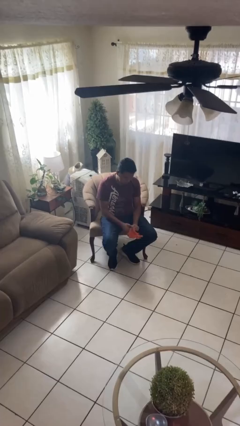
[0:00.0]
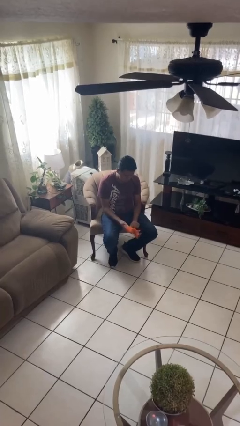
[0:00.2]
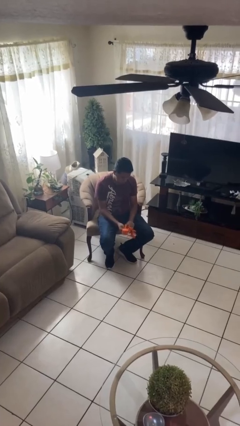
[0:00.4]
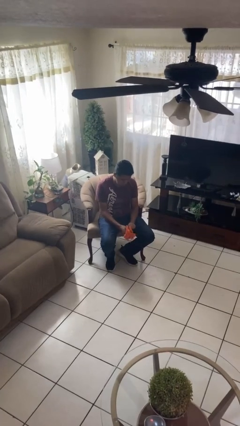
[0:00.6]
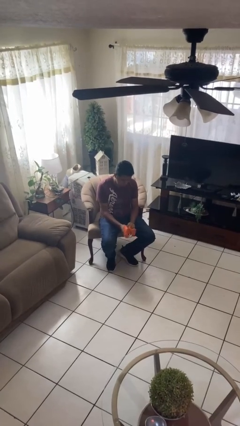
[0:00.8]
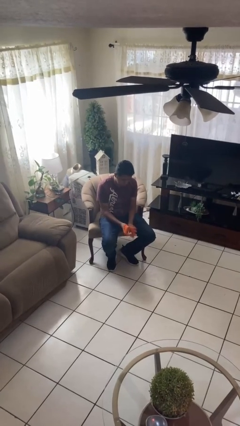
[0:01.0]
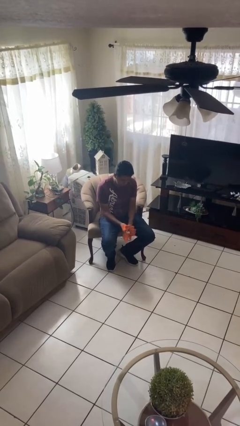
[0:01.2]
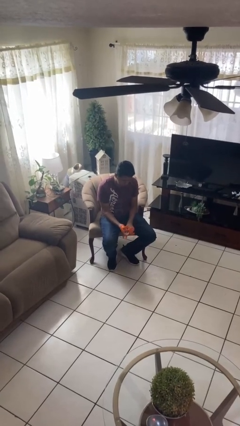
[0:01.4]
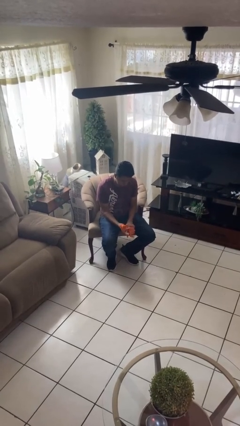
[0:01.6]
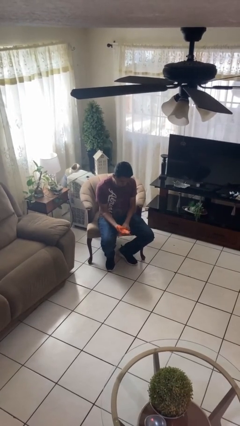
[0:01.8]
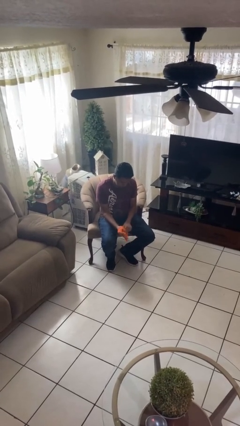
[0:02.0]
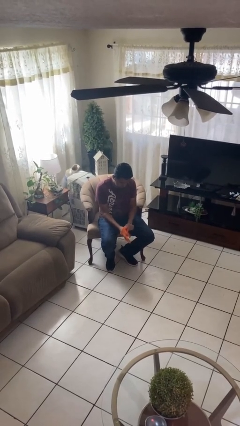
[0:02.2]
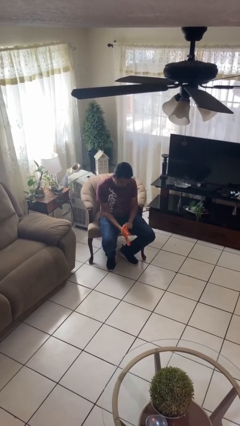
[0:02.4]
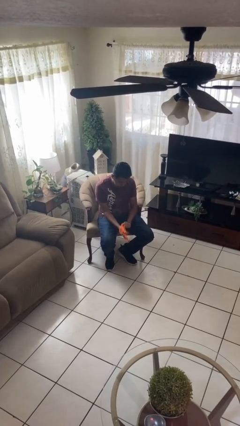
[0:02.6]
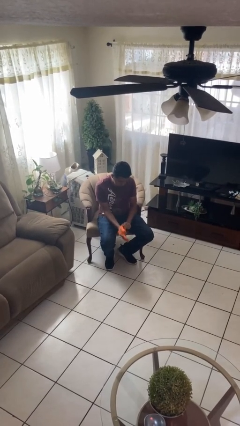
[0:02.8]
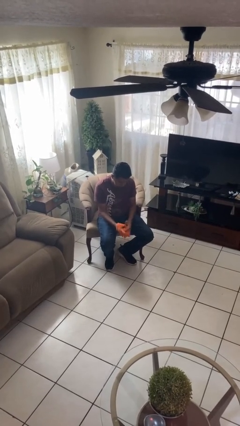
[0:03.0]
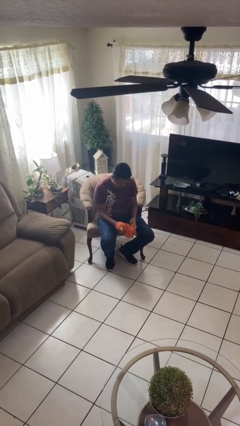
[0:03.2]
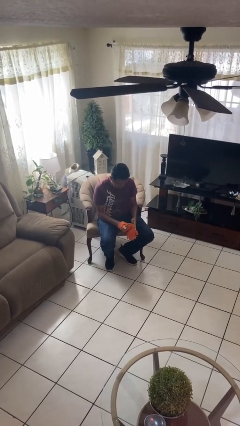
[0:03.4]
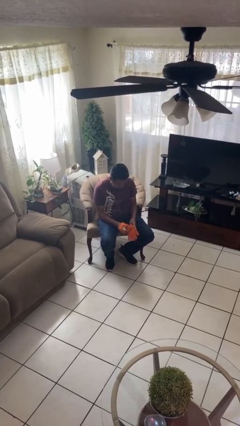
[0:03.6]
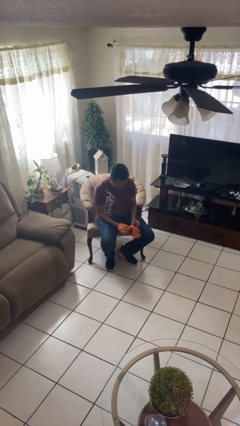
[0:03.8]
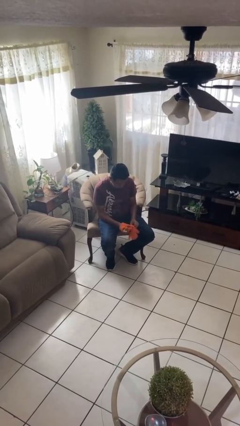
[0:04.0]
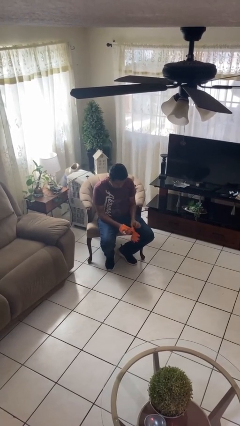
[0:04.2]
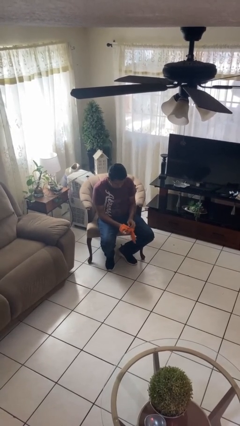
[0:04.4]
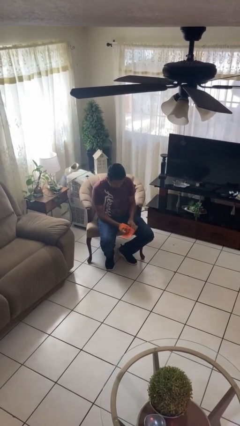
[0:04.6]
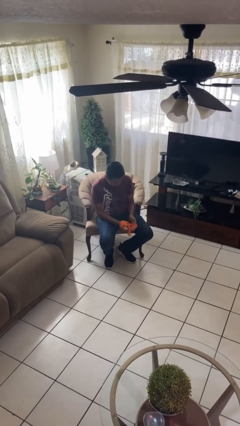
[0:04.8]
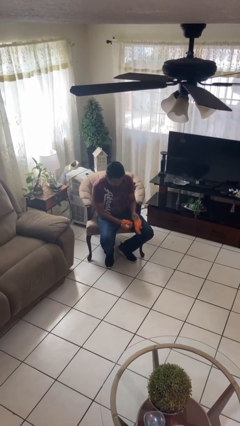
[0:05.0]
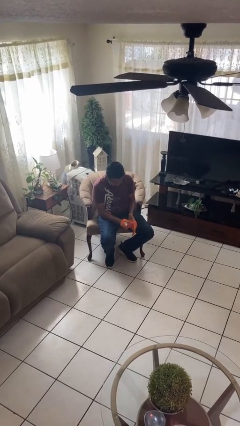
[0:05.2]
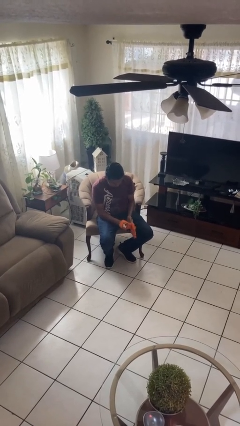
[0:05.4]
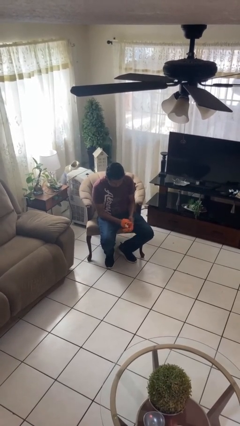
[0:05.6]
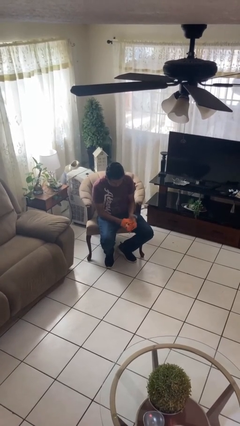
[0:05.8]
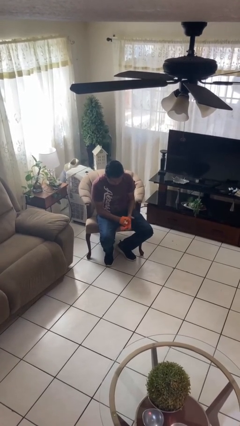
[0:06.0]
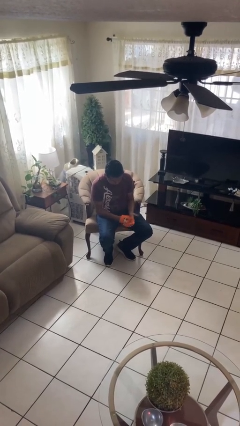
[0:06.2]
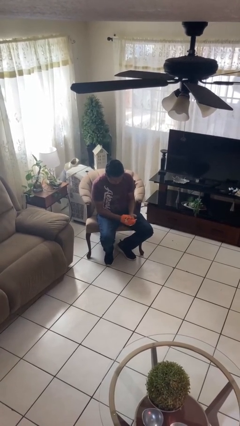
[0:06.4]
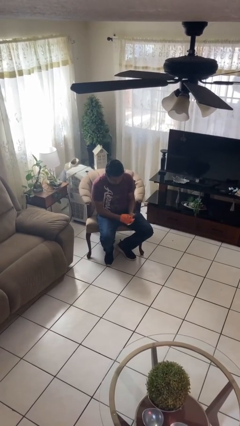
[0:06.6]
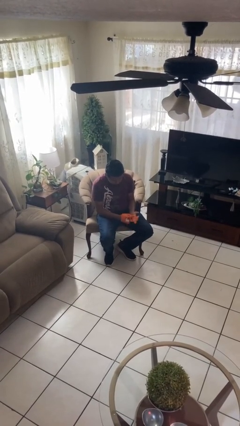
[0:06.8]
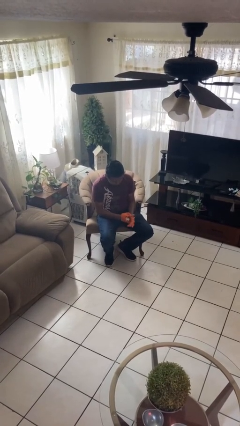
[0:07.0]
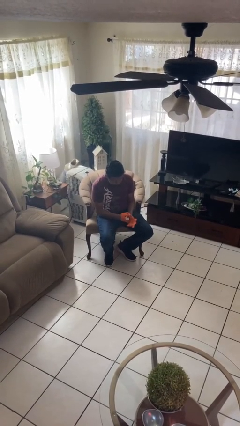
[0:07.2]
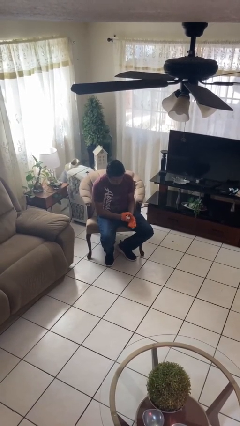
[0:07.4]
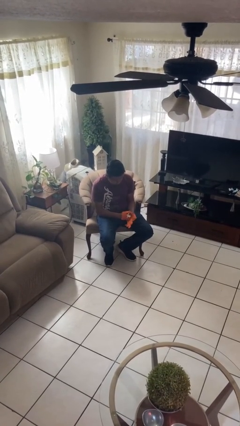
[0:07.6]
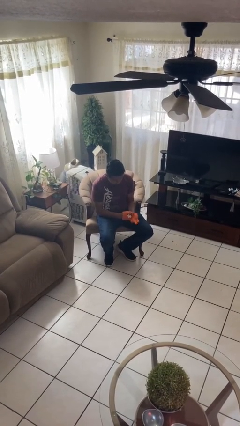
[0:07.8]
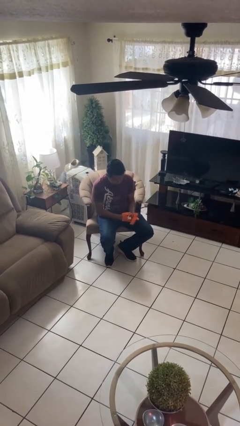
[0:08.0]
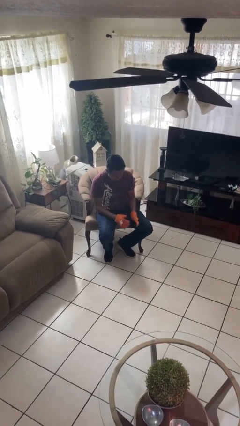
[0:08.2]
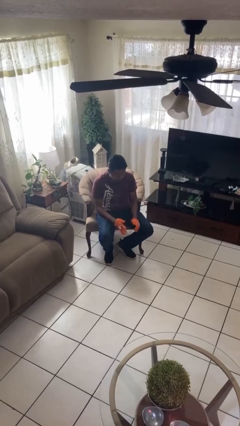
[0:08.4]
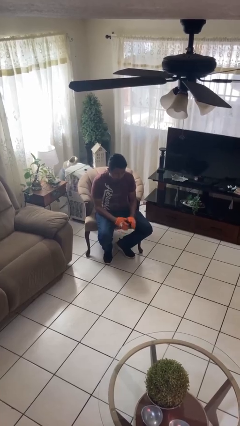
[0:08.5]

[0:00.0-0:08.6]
person puts on gloves

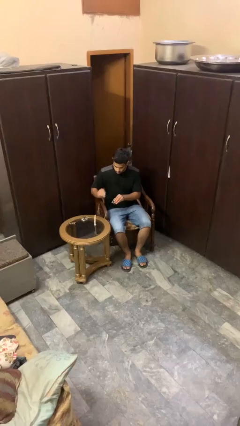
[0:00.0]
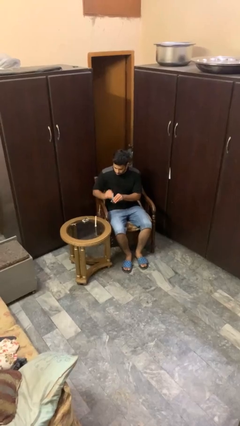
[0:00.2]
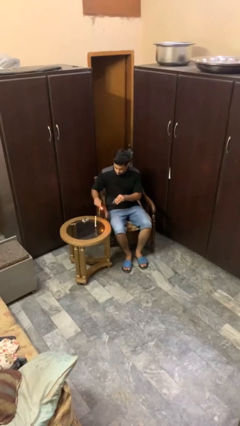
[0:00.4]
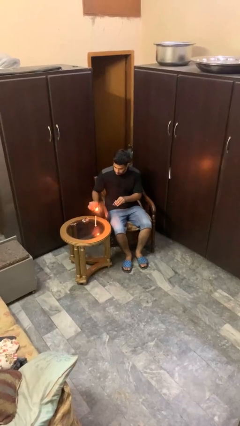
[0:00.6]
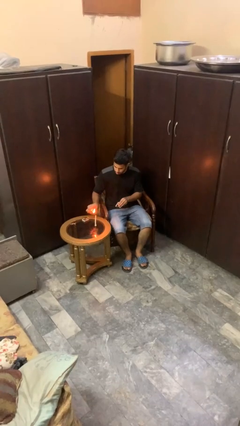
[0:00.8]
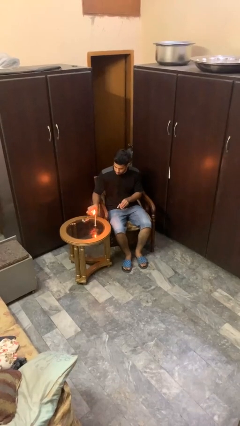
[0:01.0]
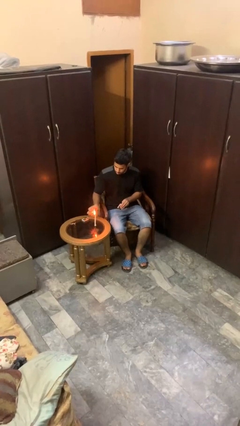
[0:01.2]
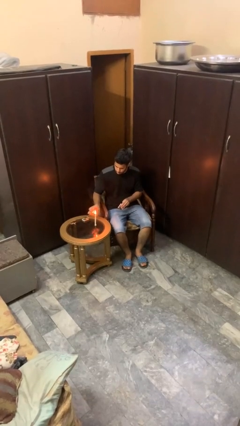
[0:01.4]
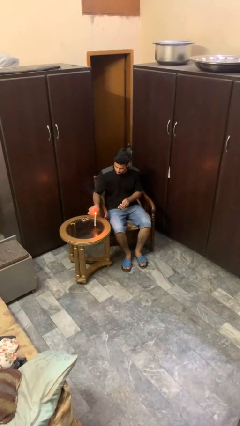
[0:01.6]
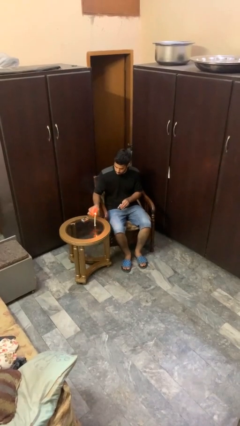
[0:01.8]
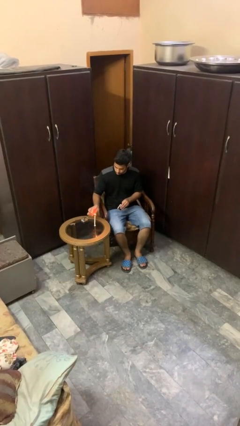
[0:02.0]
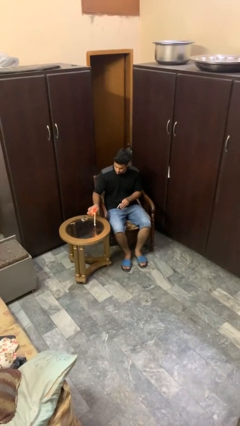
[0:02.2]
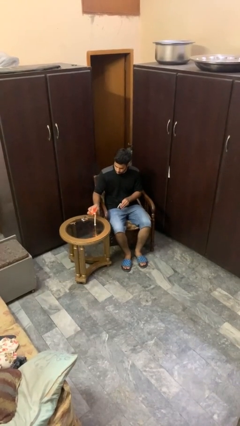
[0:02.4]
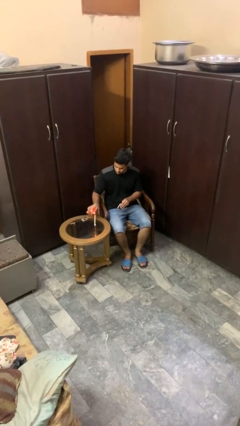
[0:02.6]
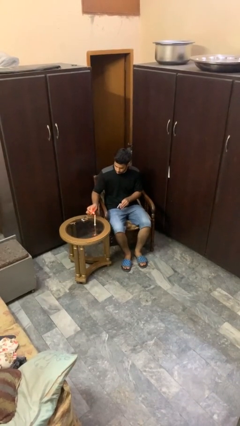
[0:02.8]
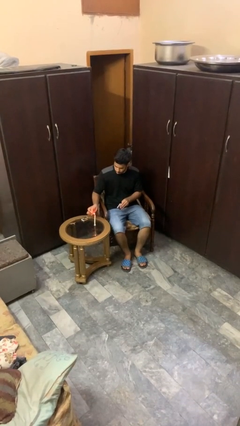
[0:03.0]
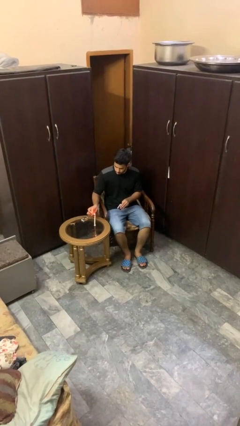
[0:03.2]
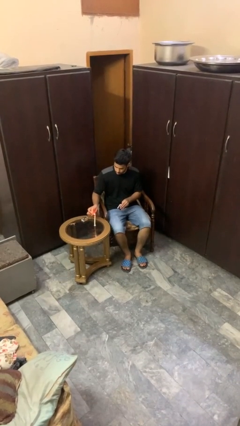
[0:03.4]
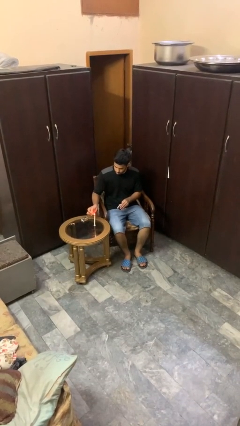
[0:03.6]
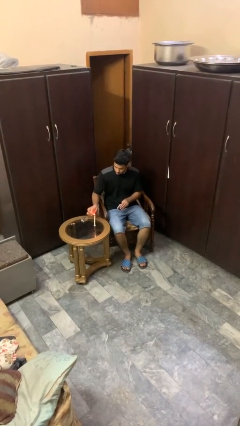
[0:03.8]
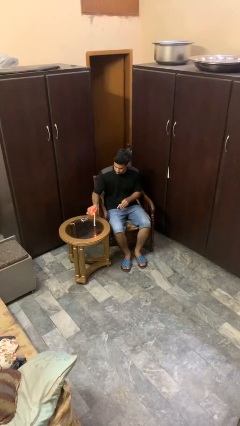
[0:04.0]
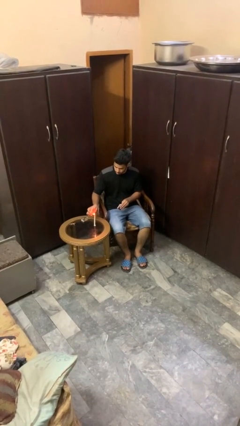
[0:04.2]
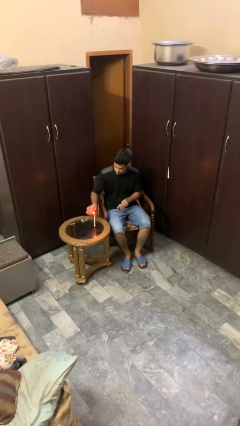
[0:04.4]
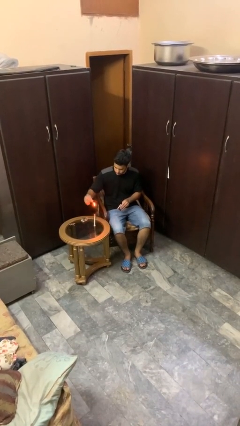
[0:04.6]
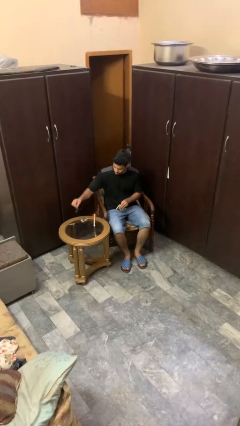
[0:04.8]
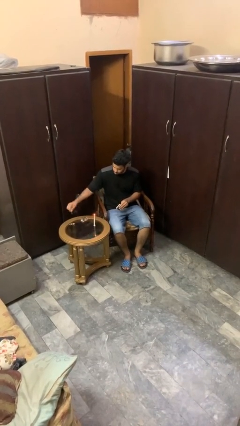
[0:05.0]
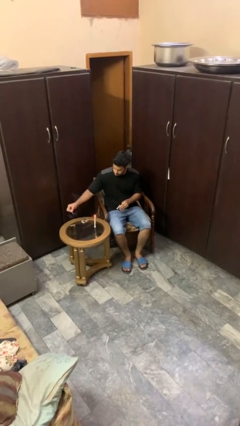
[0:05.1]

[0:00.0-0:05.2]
person lights candle

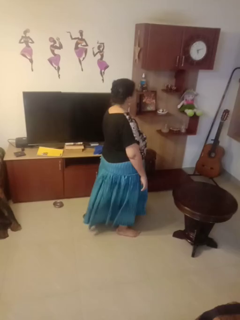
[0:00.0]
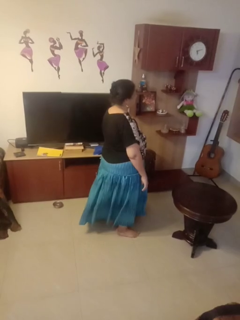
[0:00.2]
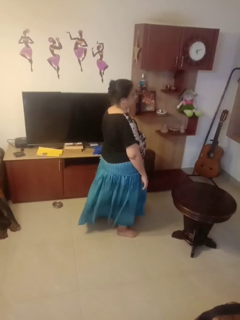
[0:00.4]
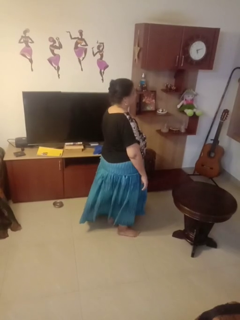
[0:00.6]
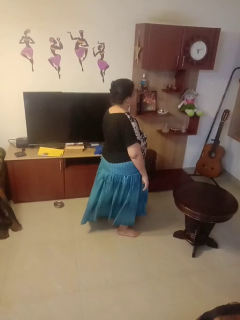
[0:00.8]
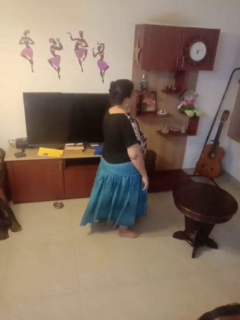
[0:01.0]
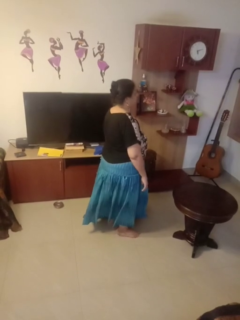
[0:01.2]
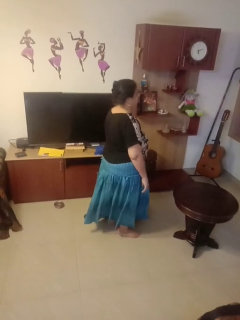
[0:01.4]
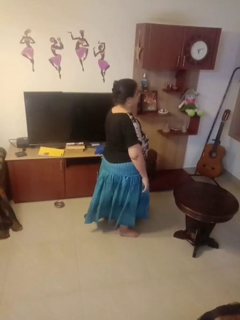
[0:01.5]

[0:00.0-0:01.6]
person shakes head

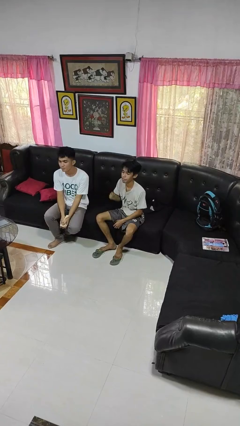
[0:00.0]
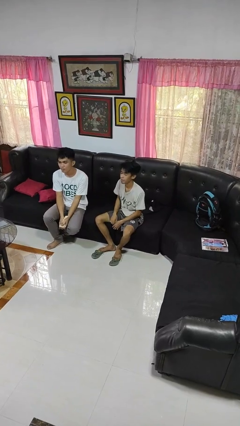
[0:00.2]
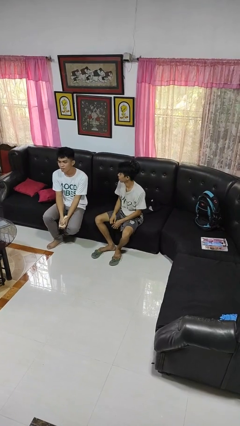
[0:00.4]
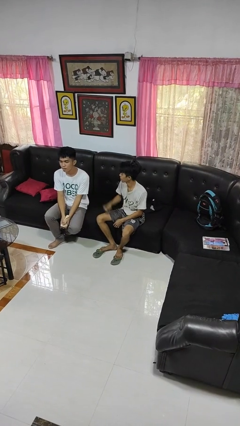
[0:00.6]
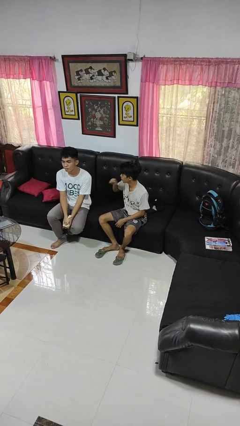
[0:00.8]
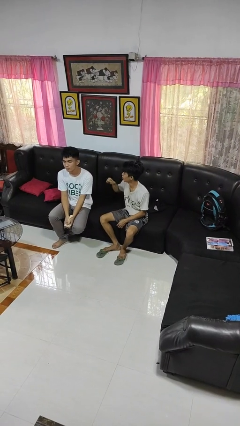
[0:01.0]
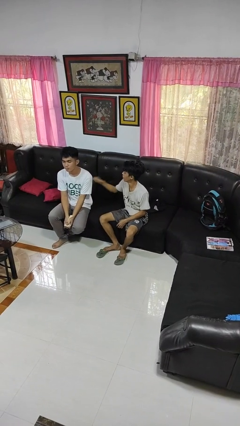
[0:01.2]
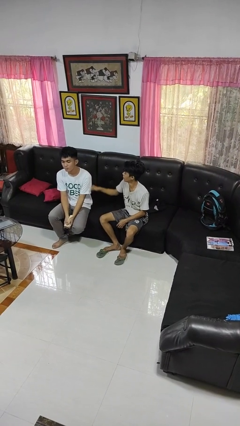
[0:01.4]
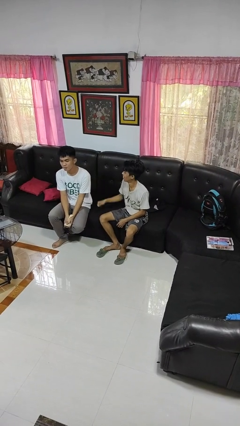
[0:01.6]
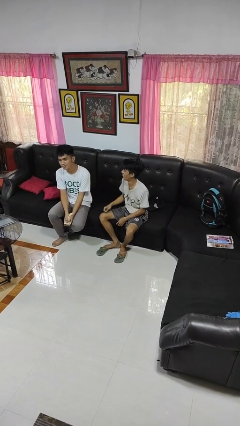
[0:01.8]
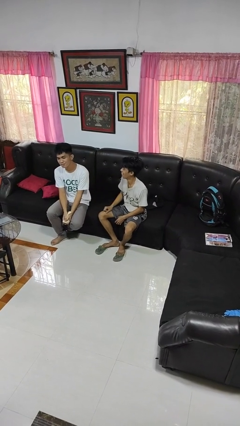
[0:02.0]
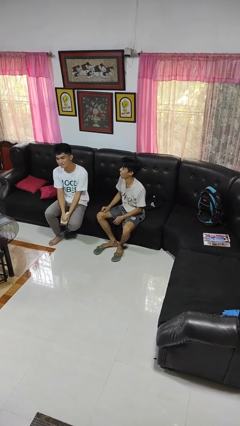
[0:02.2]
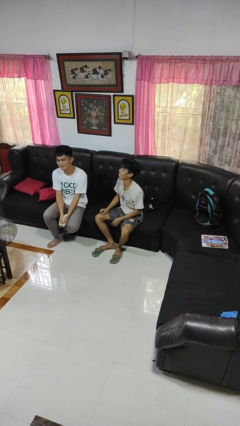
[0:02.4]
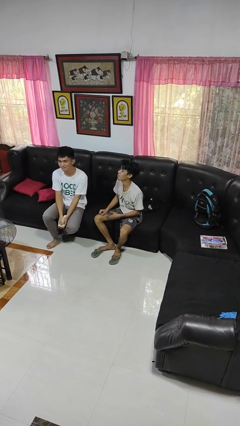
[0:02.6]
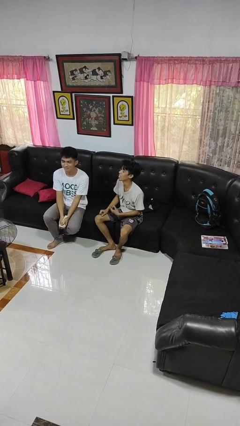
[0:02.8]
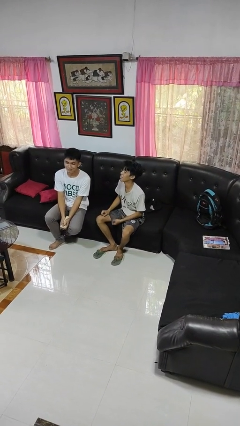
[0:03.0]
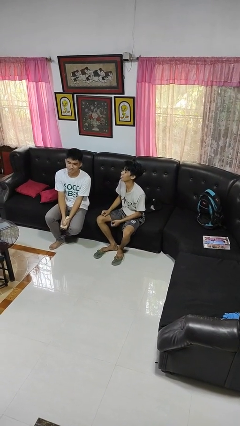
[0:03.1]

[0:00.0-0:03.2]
person pounds shoulders of person
